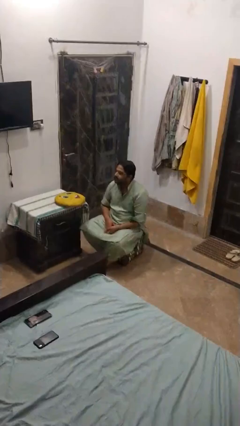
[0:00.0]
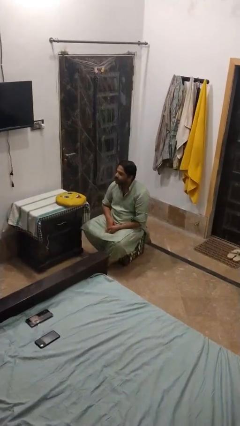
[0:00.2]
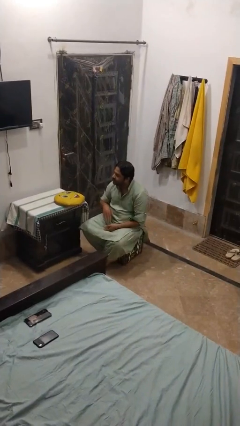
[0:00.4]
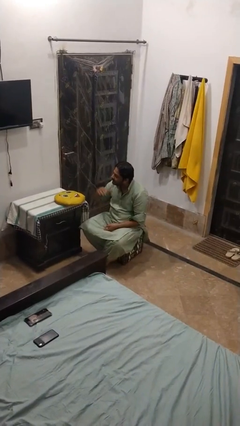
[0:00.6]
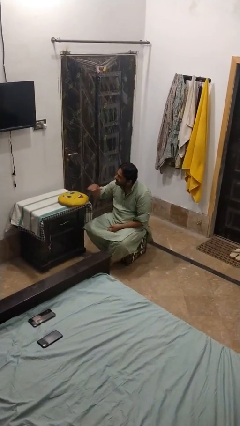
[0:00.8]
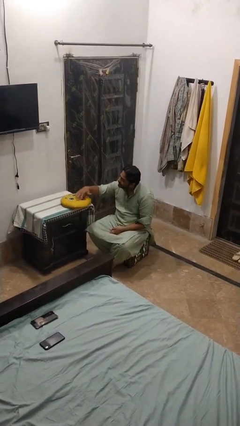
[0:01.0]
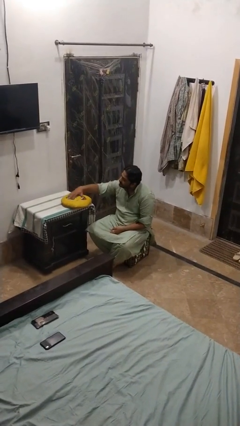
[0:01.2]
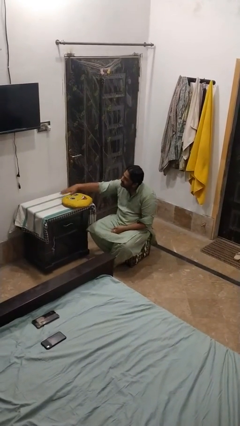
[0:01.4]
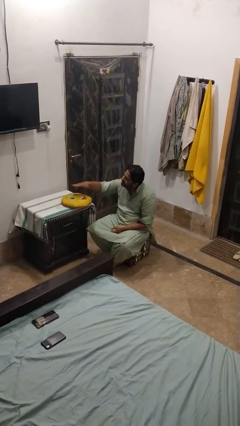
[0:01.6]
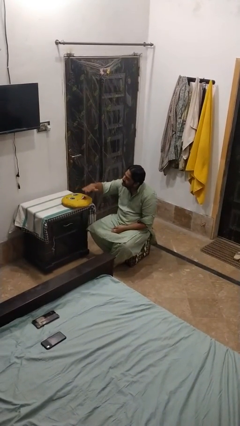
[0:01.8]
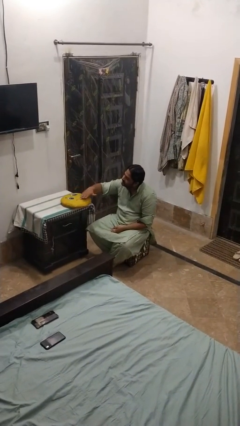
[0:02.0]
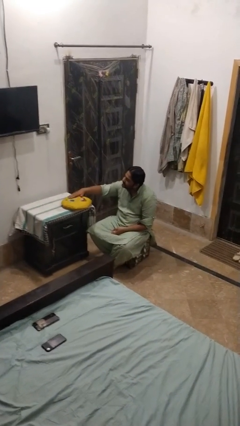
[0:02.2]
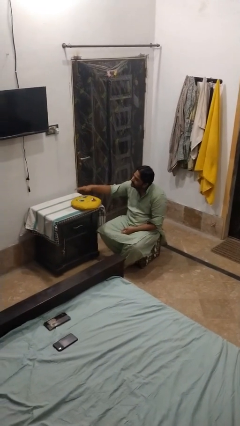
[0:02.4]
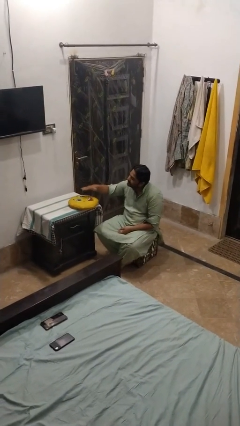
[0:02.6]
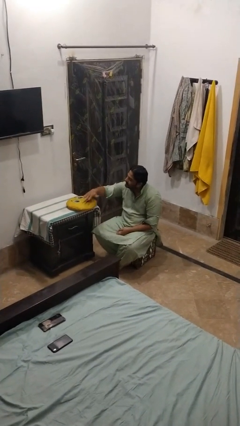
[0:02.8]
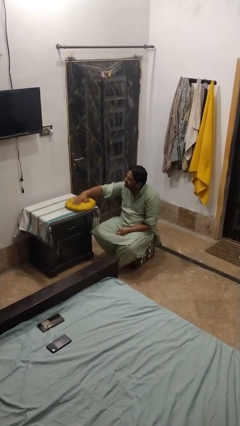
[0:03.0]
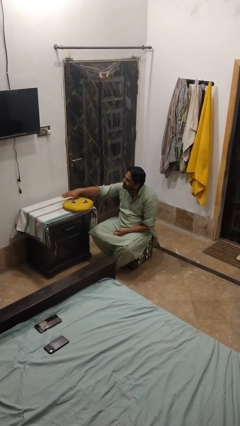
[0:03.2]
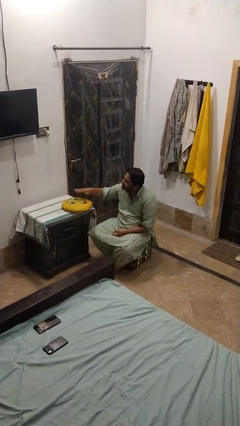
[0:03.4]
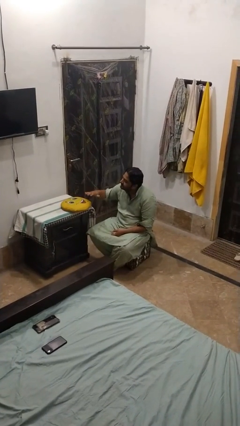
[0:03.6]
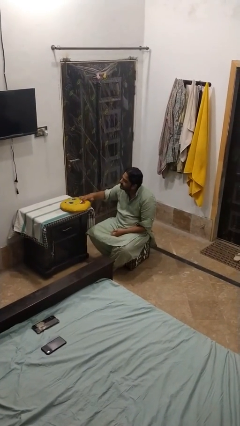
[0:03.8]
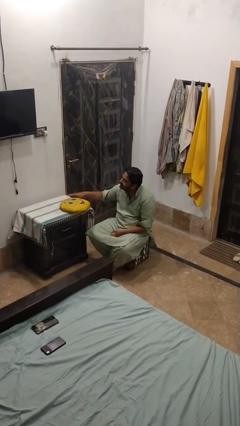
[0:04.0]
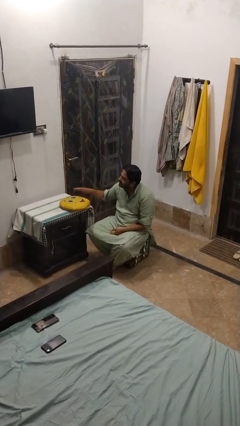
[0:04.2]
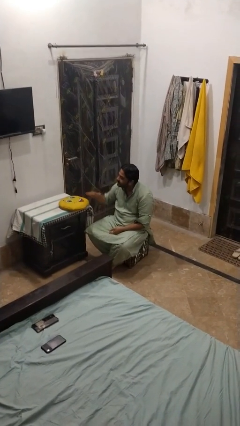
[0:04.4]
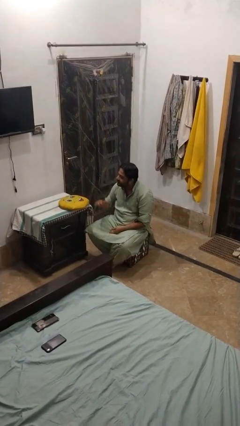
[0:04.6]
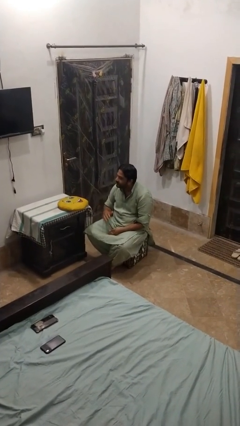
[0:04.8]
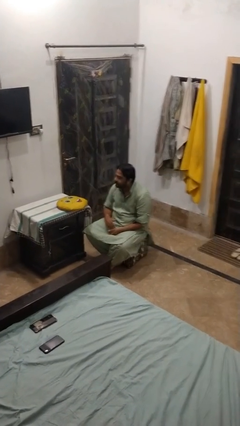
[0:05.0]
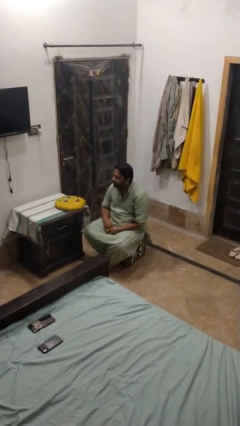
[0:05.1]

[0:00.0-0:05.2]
person waves hand over object

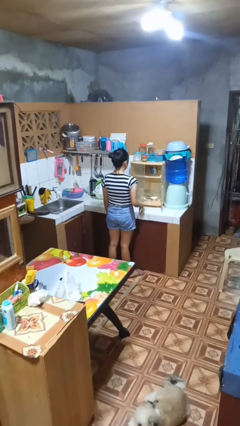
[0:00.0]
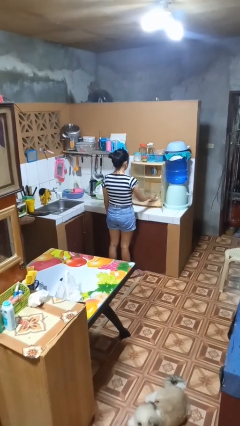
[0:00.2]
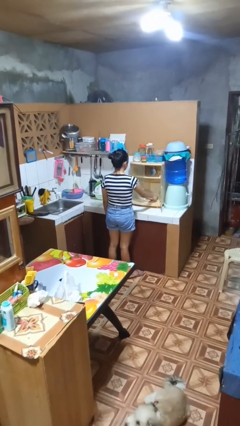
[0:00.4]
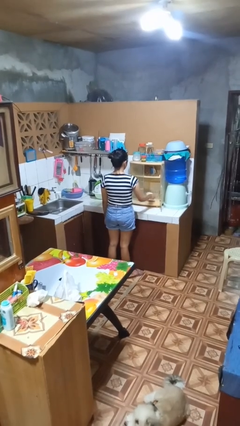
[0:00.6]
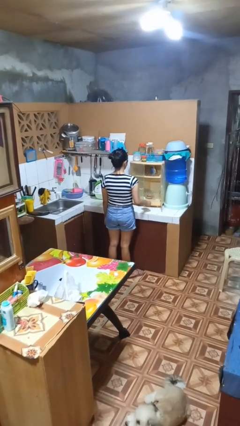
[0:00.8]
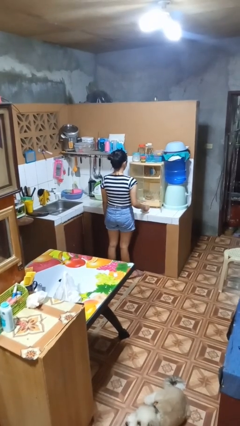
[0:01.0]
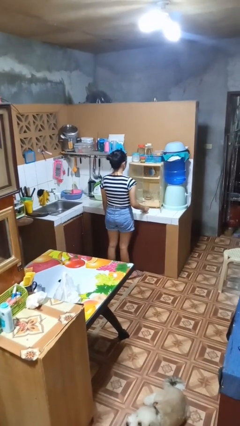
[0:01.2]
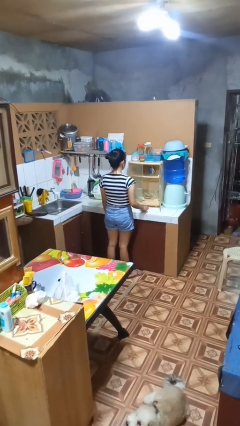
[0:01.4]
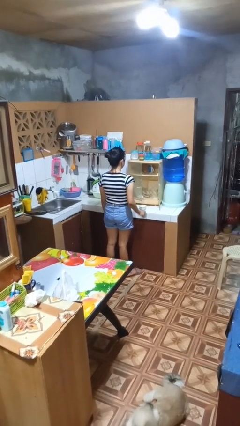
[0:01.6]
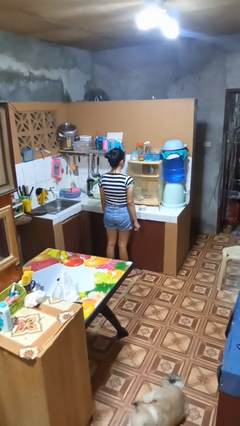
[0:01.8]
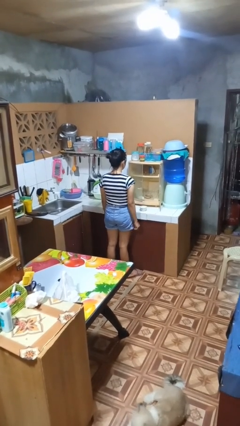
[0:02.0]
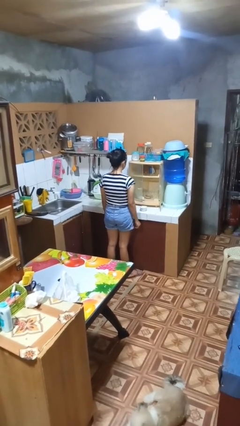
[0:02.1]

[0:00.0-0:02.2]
person takes object from cabinet

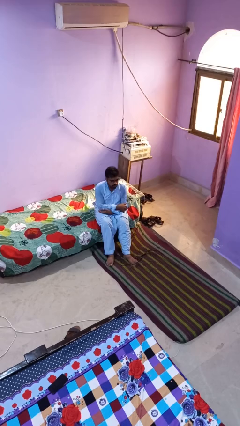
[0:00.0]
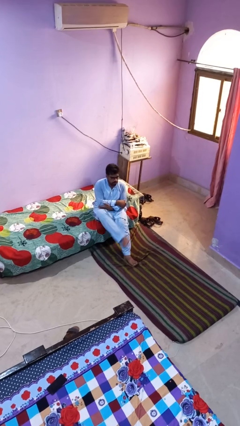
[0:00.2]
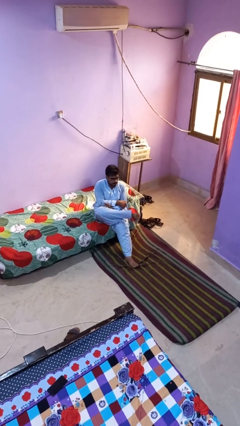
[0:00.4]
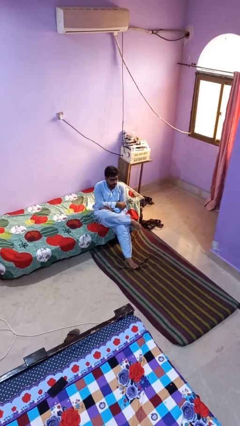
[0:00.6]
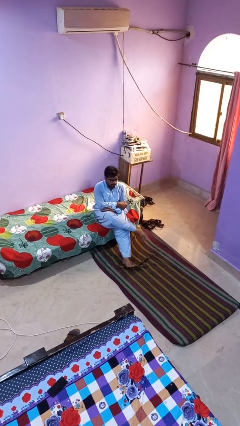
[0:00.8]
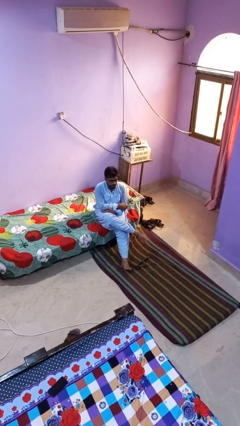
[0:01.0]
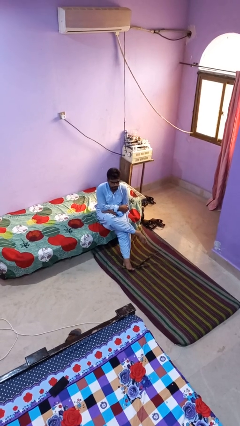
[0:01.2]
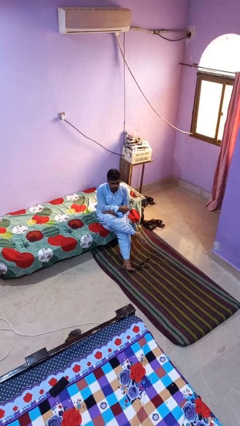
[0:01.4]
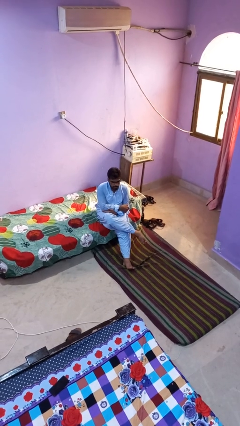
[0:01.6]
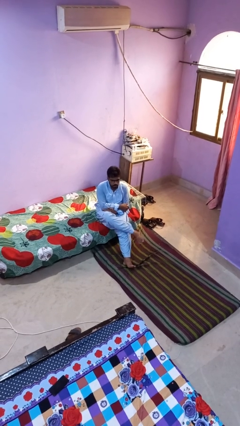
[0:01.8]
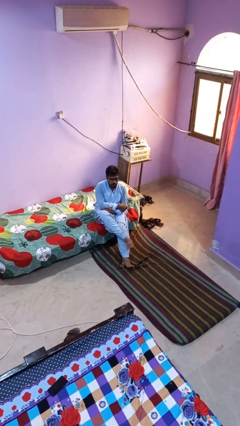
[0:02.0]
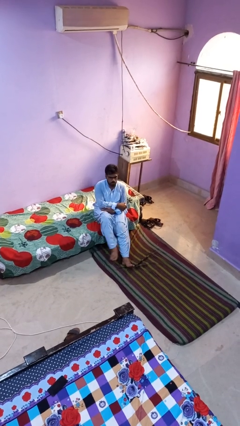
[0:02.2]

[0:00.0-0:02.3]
person crosses legs

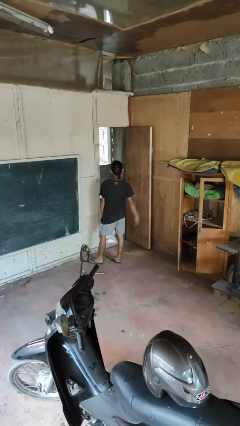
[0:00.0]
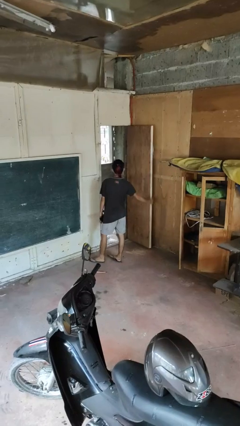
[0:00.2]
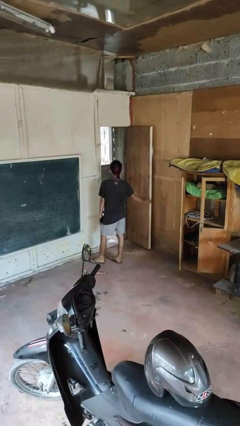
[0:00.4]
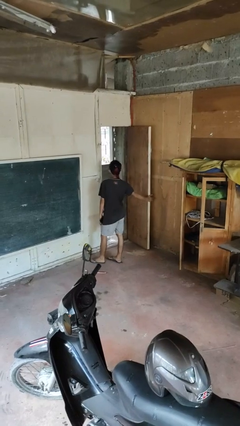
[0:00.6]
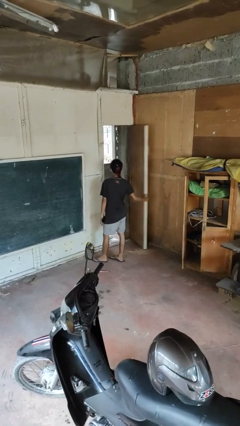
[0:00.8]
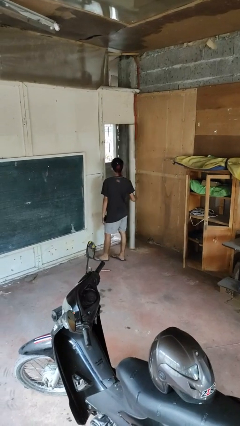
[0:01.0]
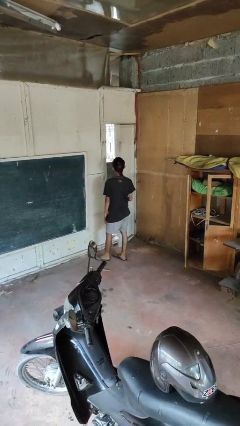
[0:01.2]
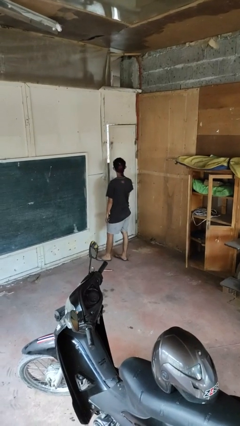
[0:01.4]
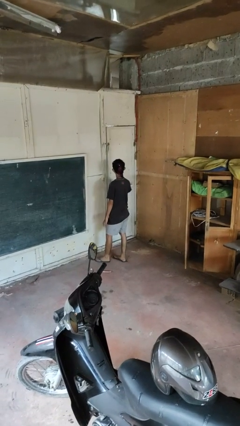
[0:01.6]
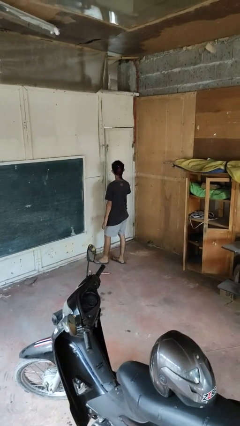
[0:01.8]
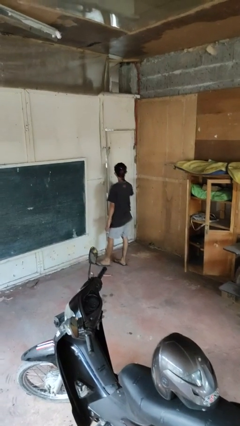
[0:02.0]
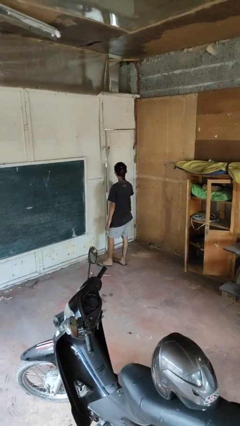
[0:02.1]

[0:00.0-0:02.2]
person closes facility door

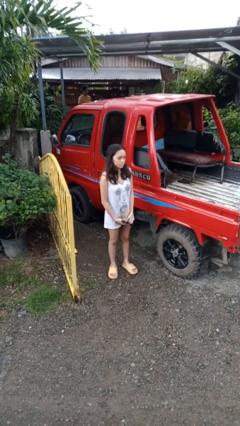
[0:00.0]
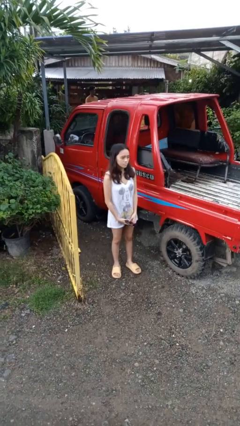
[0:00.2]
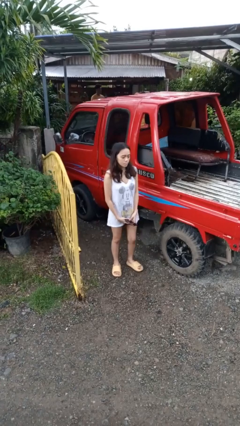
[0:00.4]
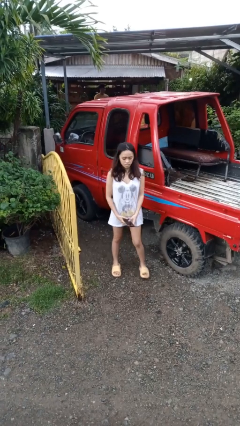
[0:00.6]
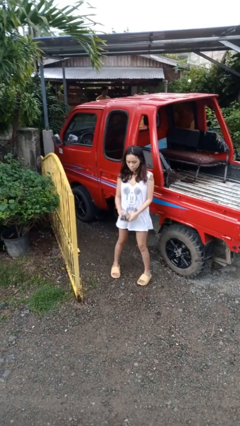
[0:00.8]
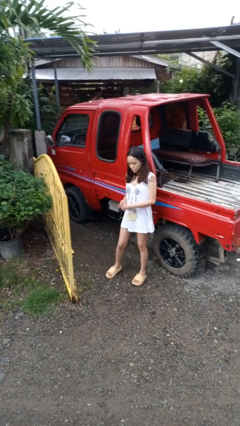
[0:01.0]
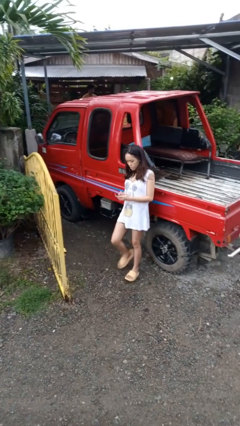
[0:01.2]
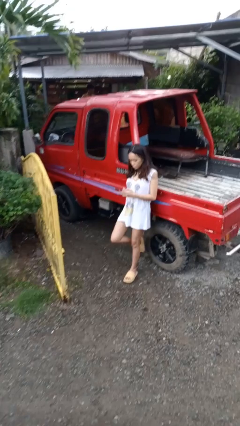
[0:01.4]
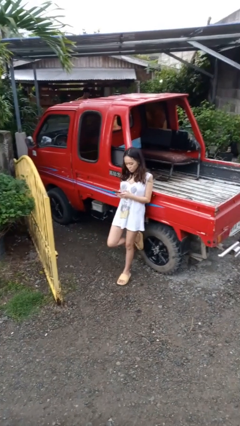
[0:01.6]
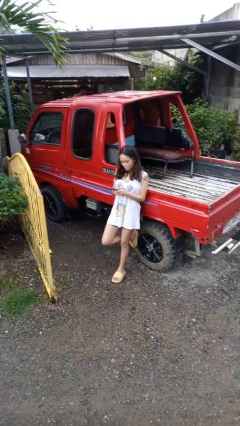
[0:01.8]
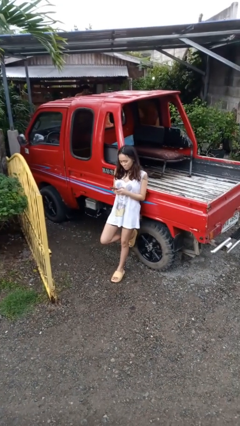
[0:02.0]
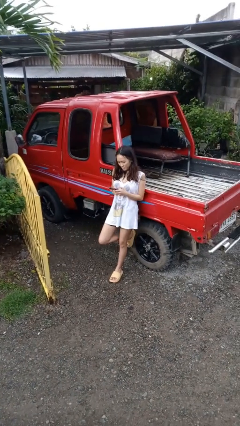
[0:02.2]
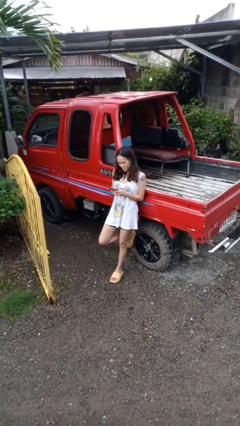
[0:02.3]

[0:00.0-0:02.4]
person leans against car

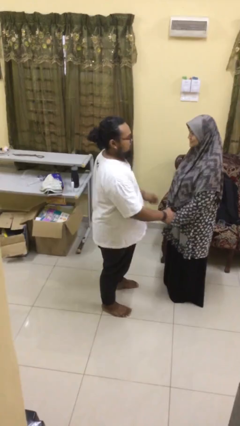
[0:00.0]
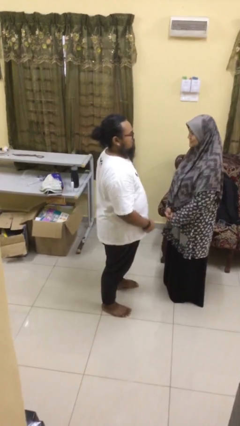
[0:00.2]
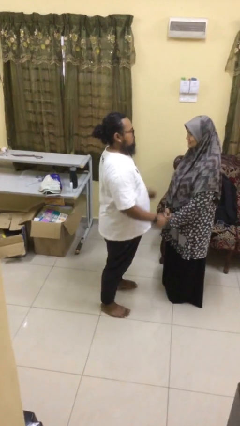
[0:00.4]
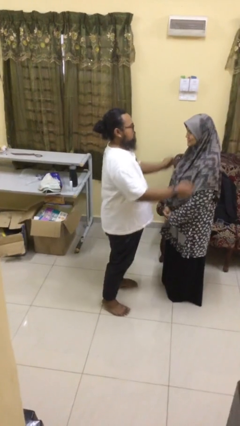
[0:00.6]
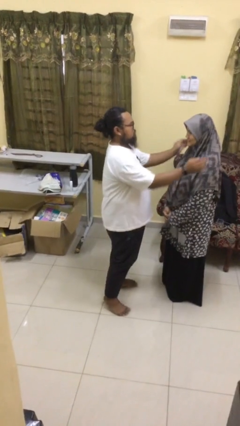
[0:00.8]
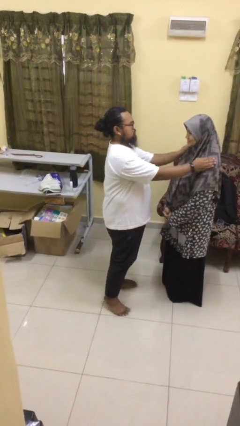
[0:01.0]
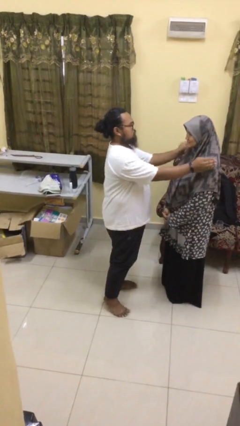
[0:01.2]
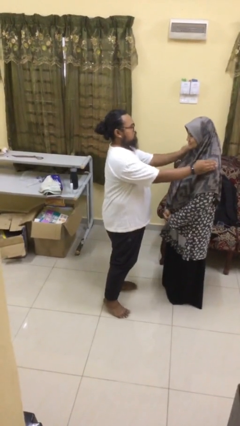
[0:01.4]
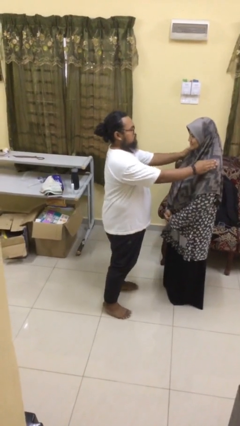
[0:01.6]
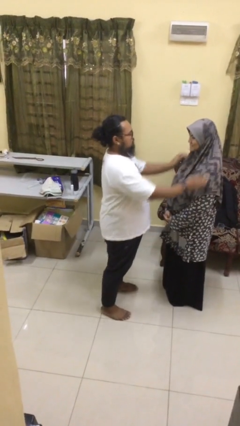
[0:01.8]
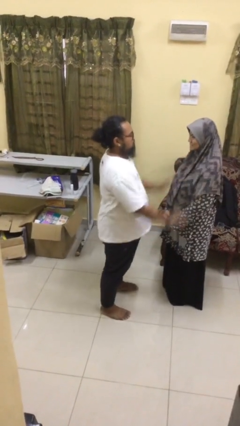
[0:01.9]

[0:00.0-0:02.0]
person pounds shoulders of person

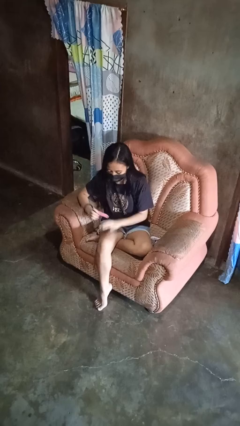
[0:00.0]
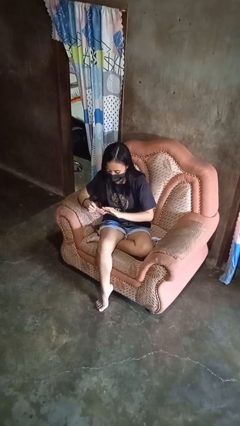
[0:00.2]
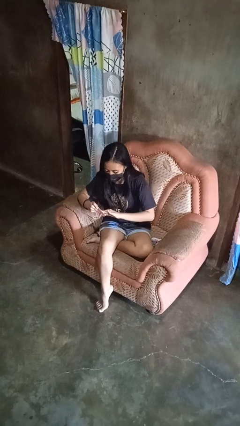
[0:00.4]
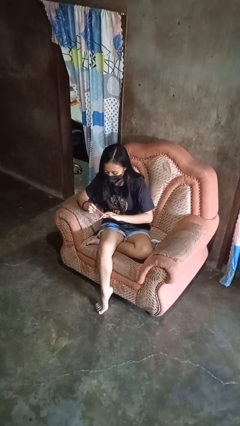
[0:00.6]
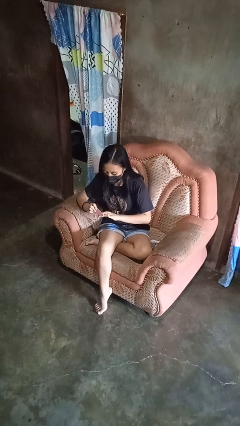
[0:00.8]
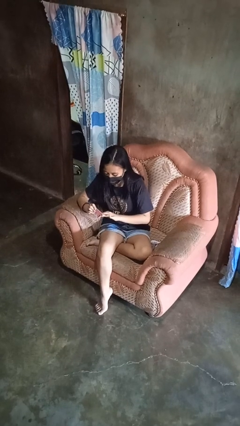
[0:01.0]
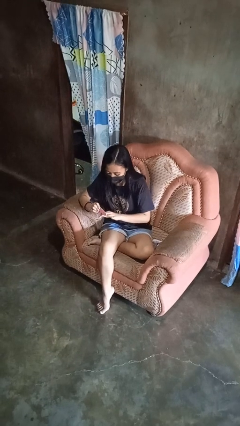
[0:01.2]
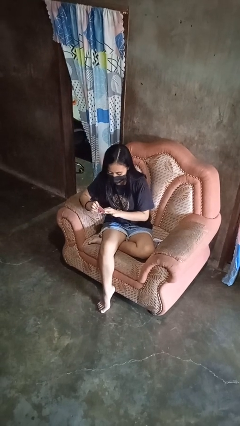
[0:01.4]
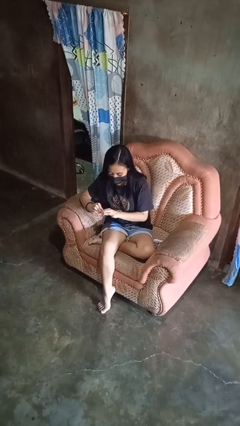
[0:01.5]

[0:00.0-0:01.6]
person files fingernails
